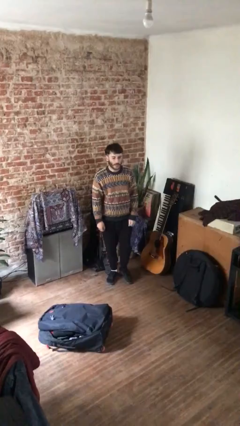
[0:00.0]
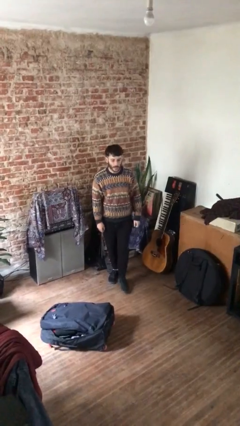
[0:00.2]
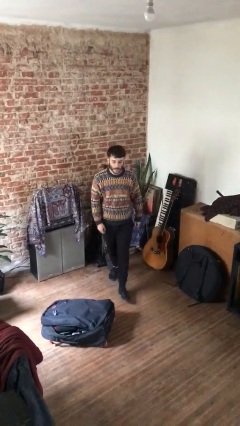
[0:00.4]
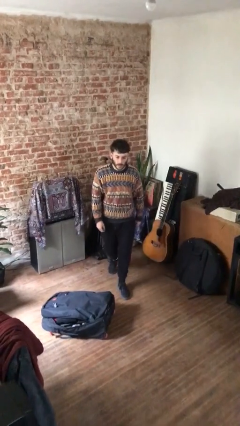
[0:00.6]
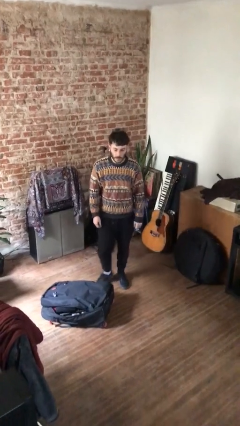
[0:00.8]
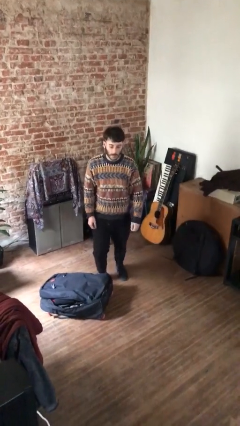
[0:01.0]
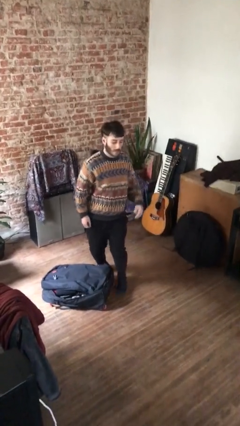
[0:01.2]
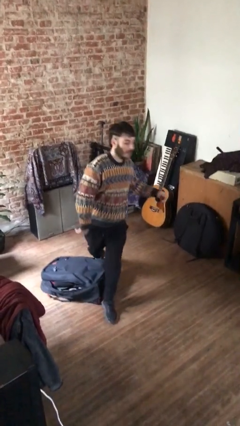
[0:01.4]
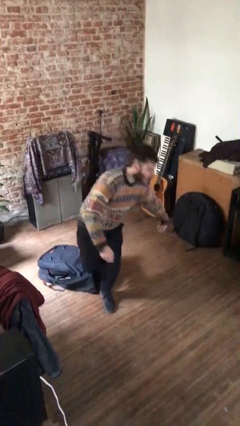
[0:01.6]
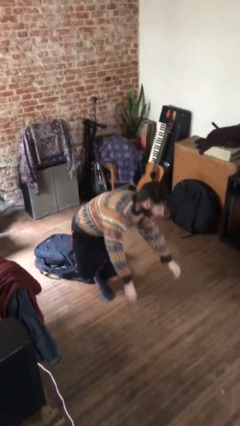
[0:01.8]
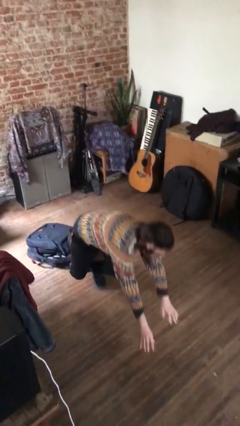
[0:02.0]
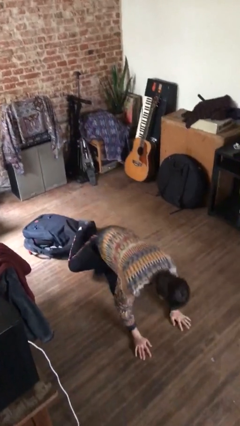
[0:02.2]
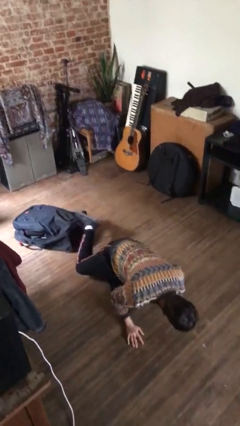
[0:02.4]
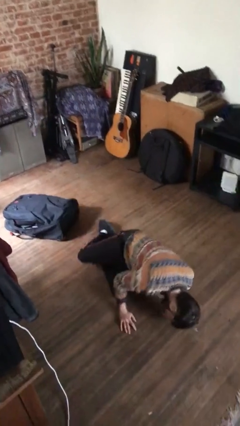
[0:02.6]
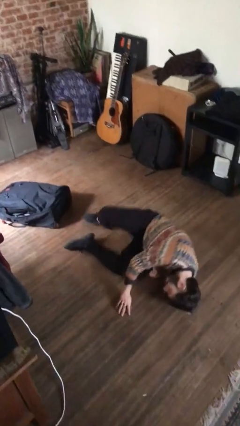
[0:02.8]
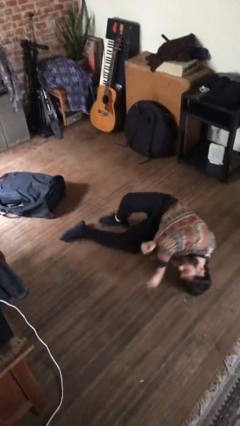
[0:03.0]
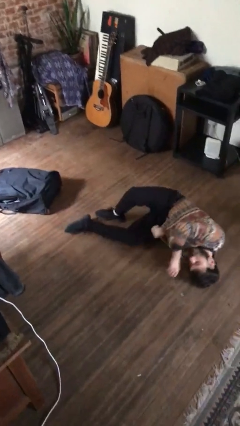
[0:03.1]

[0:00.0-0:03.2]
person trips on object on floor

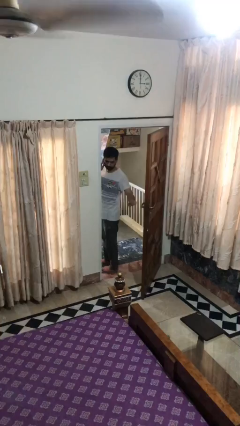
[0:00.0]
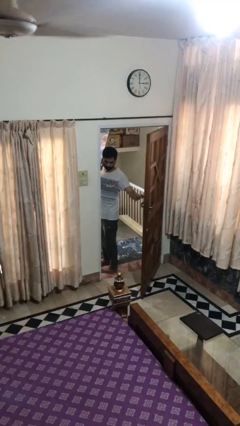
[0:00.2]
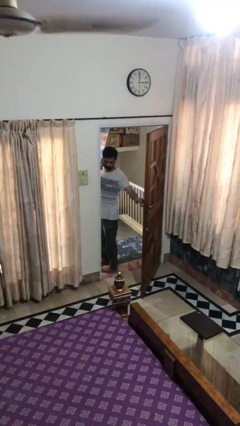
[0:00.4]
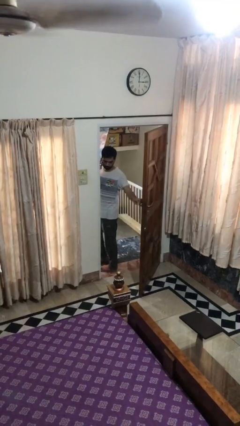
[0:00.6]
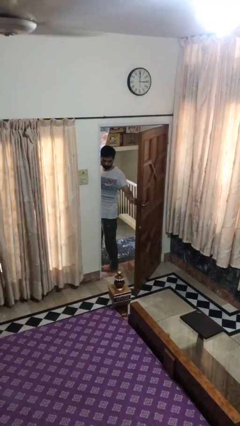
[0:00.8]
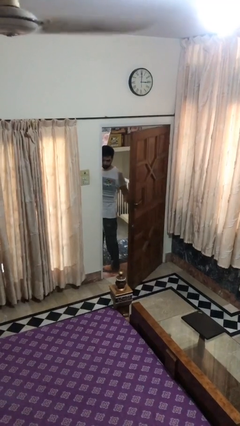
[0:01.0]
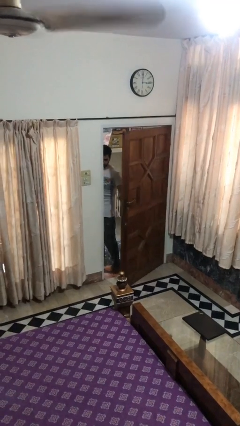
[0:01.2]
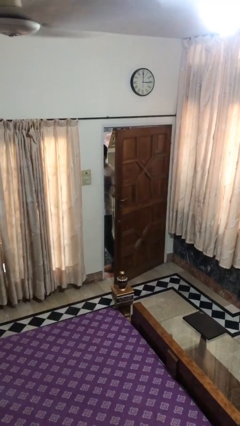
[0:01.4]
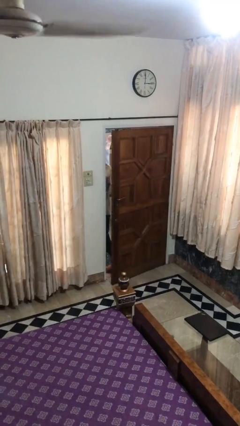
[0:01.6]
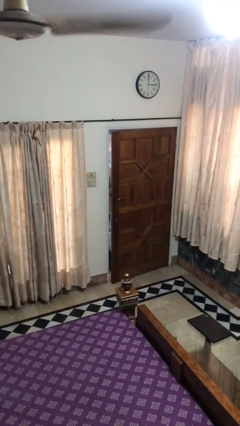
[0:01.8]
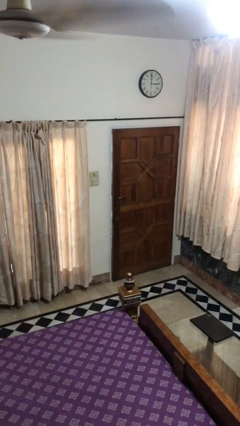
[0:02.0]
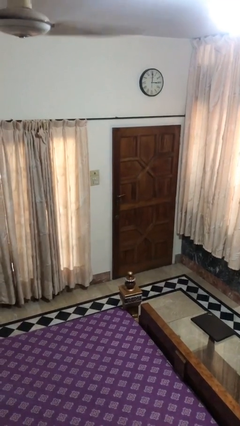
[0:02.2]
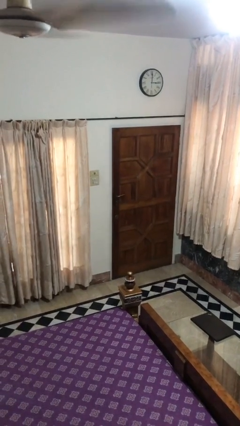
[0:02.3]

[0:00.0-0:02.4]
person closes facility door

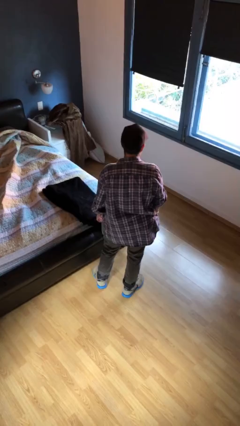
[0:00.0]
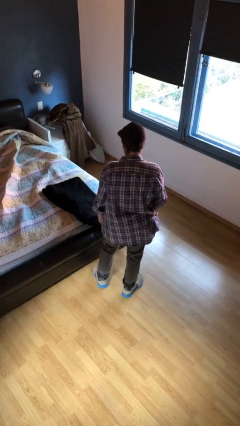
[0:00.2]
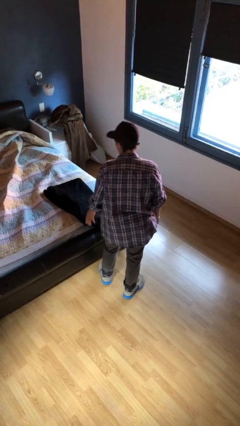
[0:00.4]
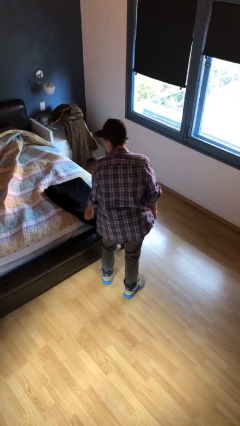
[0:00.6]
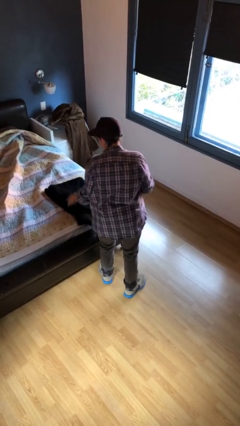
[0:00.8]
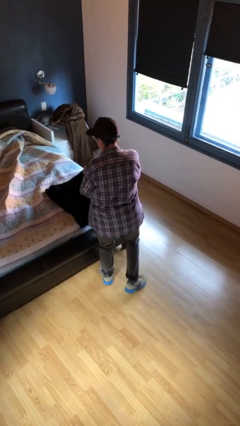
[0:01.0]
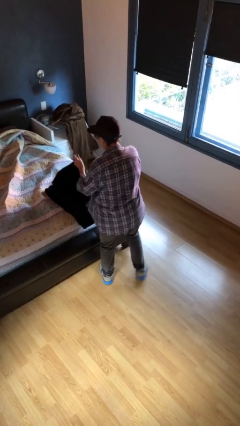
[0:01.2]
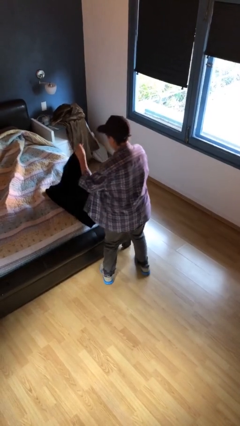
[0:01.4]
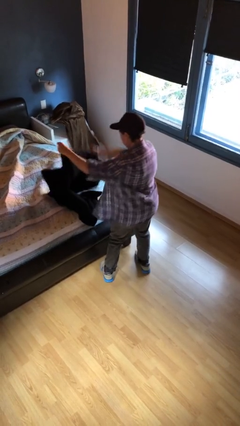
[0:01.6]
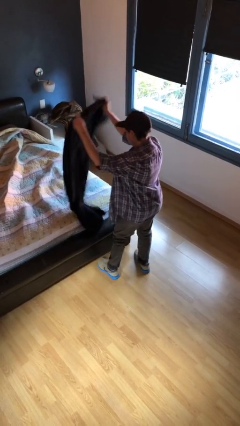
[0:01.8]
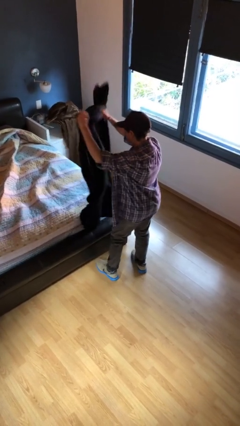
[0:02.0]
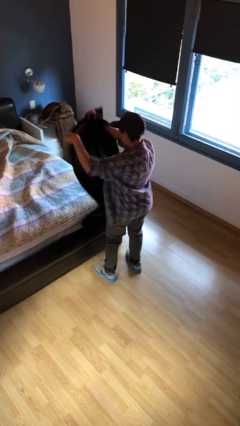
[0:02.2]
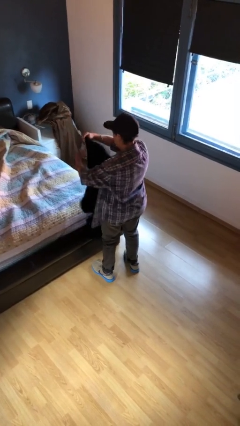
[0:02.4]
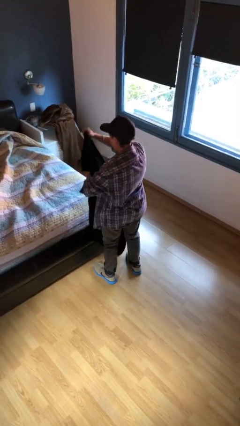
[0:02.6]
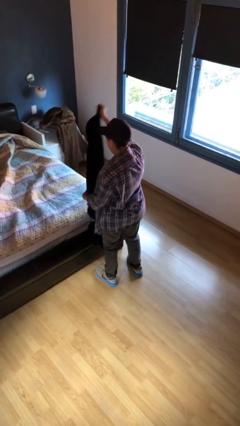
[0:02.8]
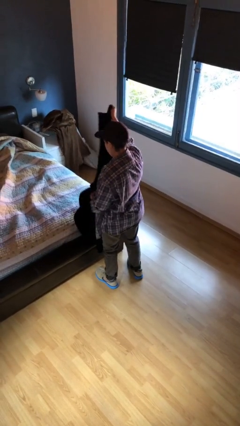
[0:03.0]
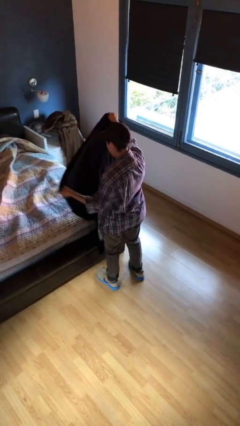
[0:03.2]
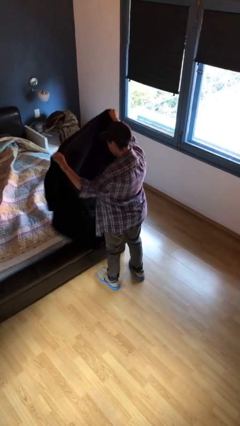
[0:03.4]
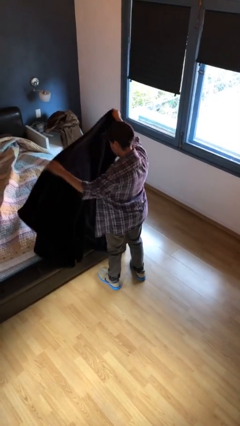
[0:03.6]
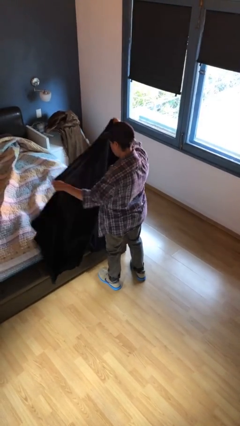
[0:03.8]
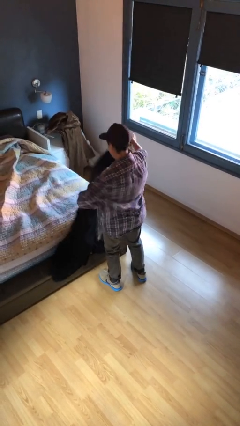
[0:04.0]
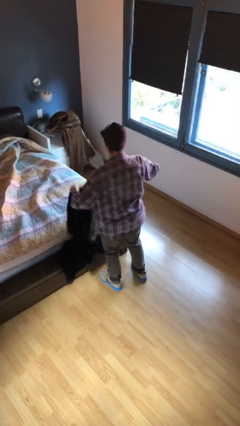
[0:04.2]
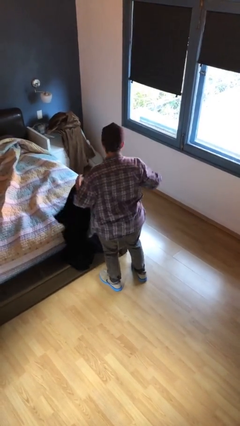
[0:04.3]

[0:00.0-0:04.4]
person unfolds blanket

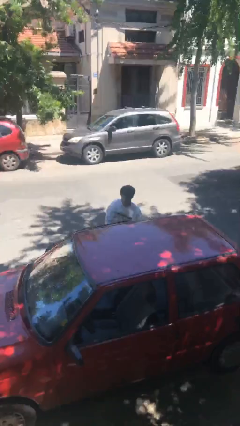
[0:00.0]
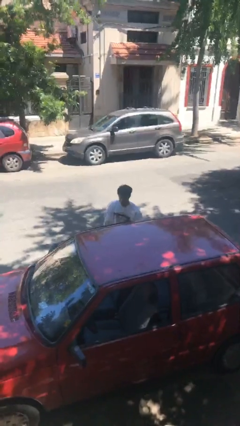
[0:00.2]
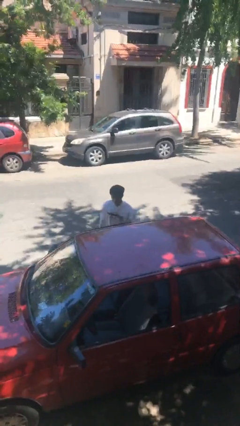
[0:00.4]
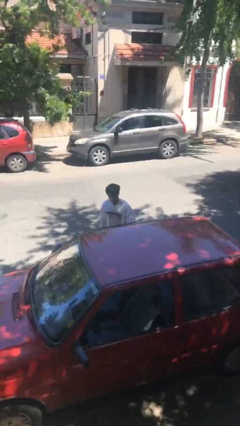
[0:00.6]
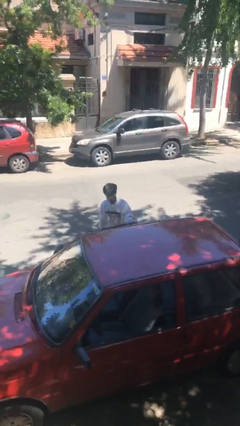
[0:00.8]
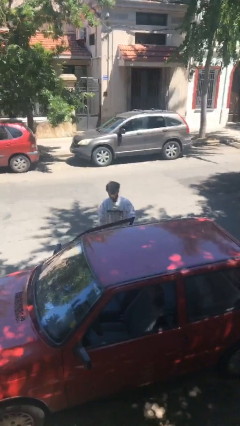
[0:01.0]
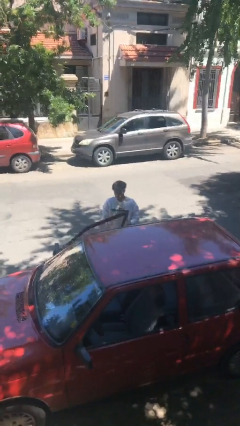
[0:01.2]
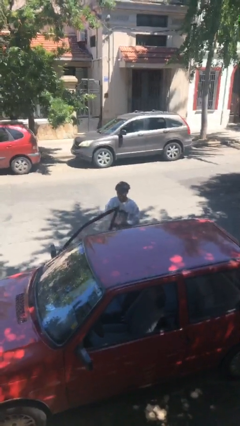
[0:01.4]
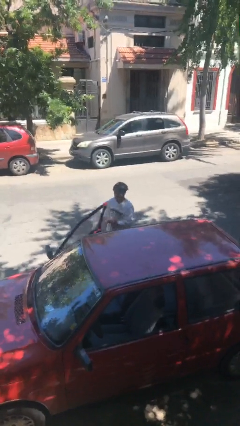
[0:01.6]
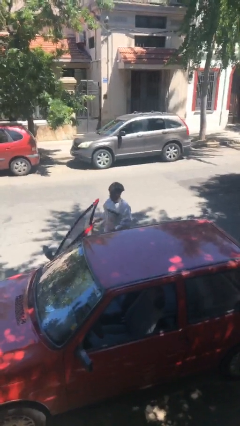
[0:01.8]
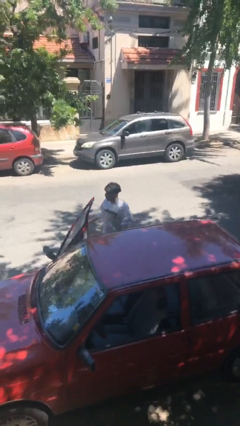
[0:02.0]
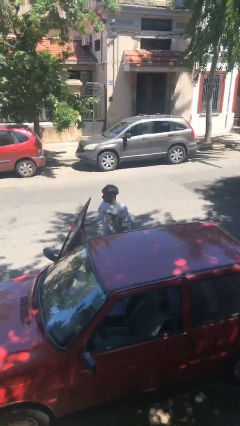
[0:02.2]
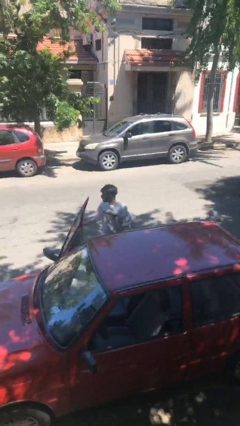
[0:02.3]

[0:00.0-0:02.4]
person opens car door

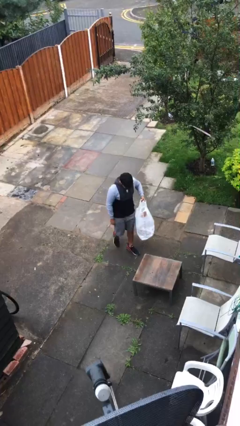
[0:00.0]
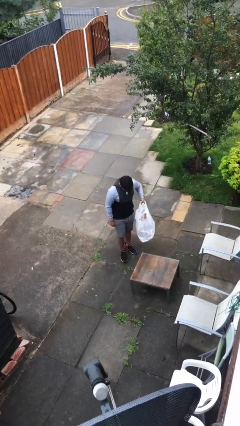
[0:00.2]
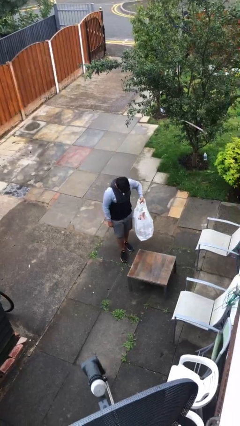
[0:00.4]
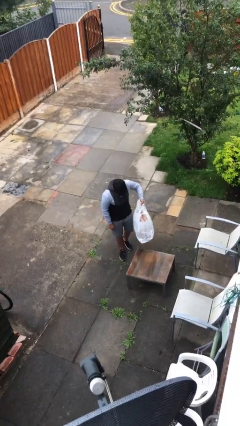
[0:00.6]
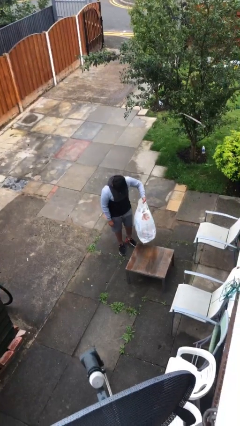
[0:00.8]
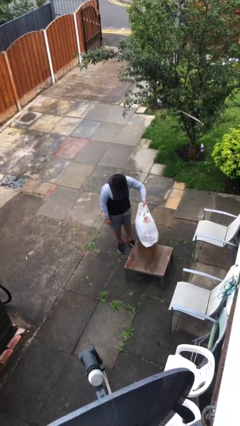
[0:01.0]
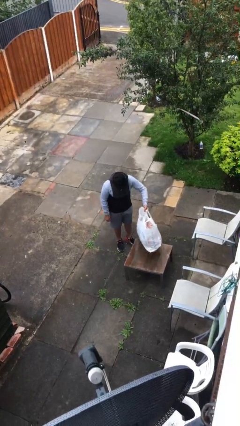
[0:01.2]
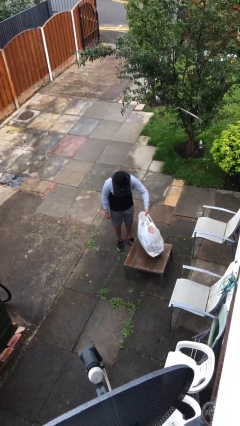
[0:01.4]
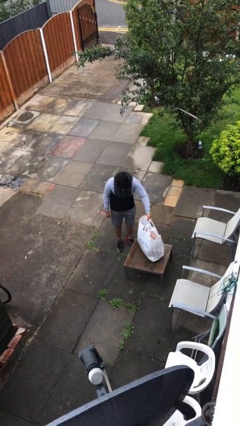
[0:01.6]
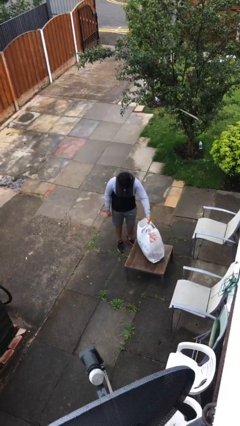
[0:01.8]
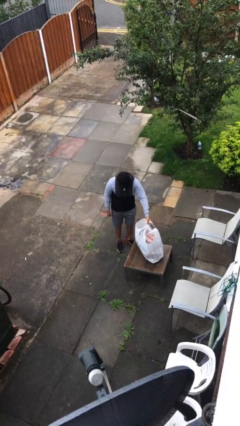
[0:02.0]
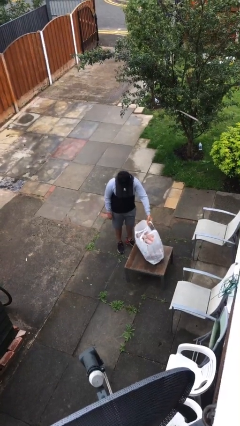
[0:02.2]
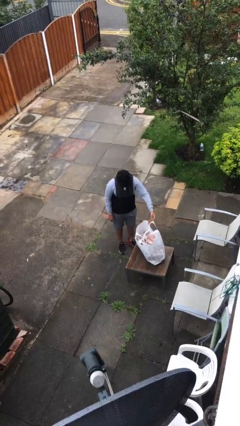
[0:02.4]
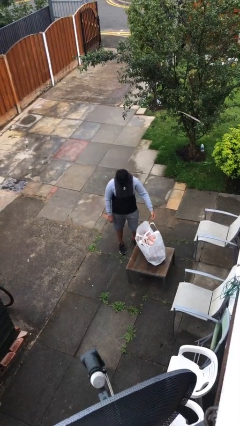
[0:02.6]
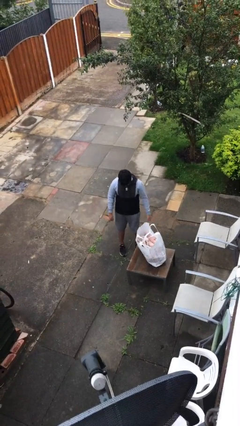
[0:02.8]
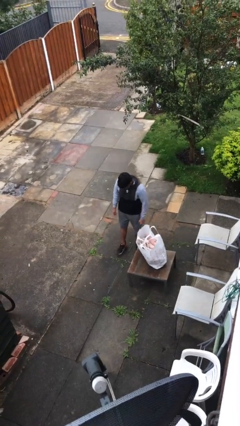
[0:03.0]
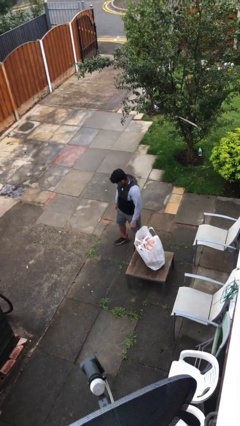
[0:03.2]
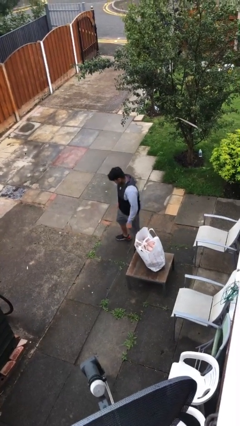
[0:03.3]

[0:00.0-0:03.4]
person puts down object on table

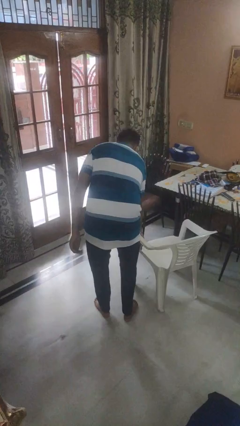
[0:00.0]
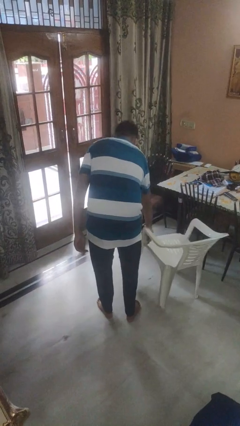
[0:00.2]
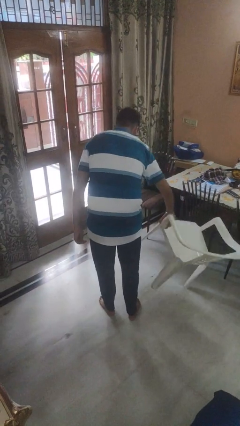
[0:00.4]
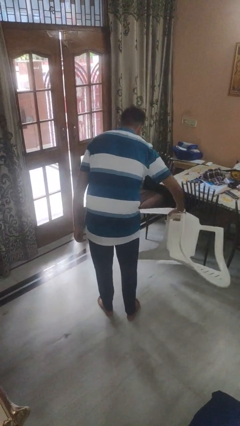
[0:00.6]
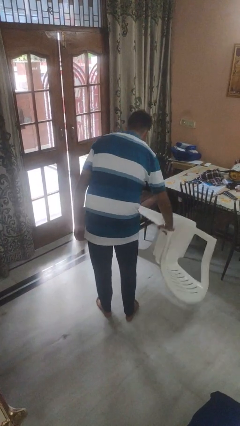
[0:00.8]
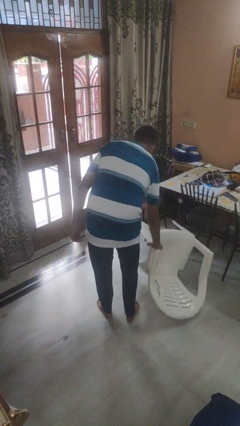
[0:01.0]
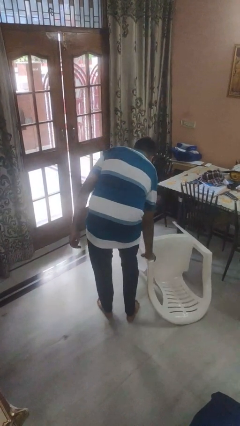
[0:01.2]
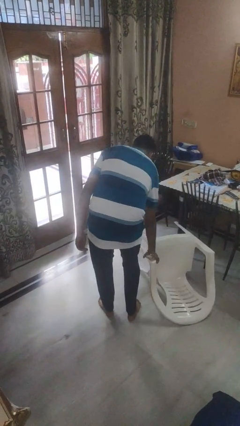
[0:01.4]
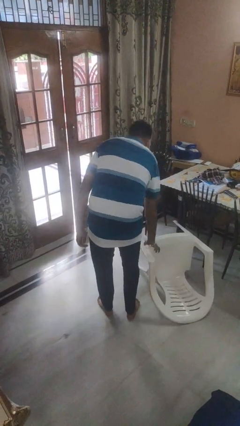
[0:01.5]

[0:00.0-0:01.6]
person knocks over furniture
